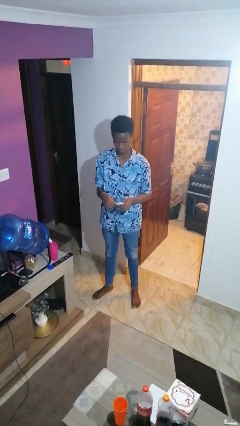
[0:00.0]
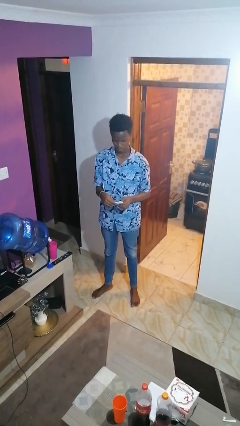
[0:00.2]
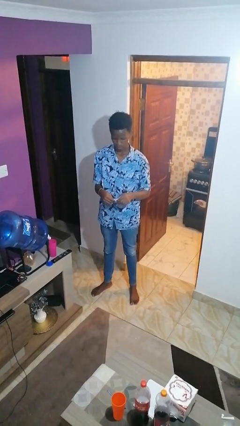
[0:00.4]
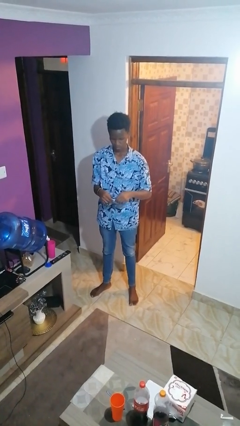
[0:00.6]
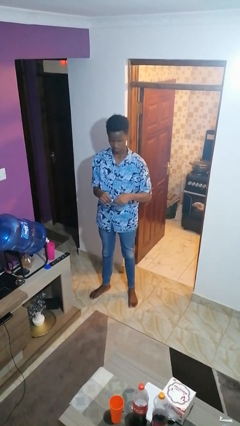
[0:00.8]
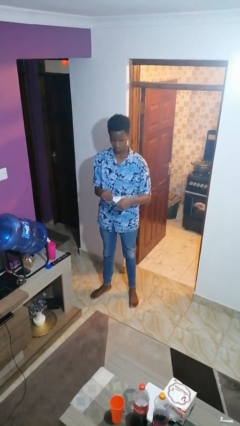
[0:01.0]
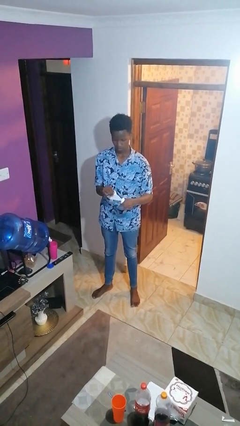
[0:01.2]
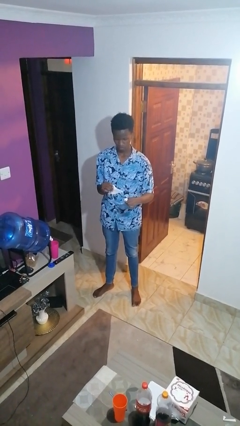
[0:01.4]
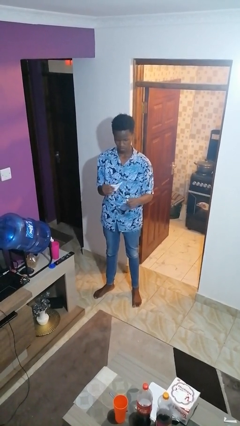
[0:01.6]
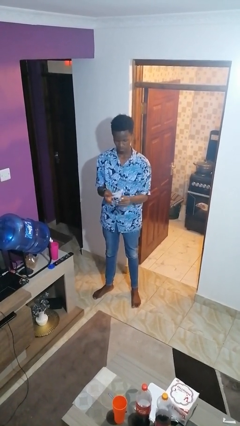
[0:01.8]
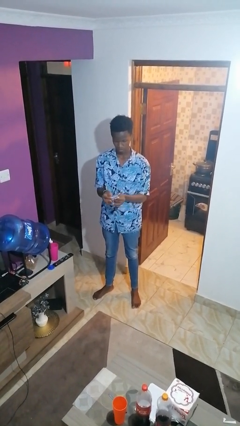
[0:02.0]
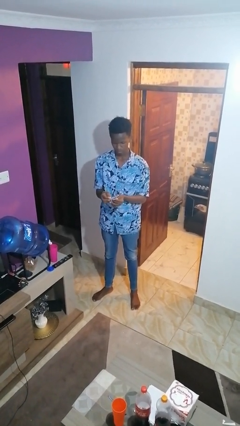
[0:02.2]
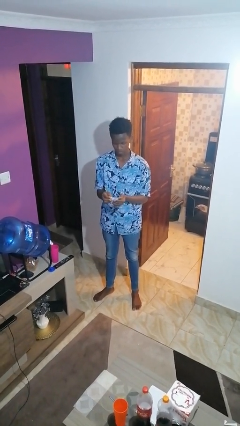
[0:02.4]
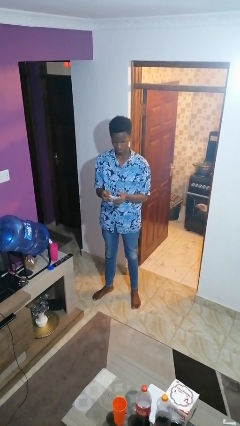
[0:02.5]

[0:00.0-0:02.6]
person tears paper

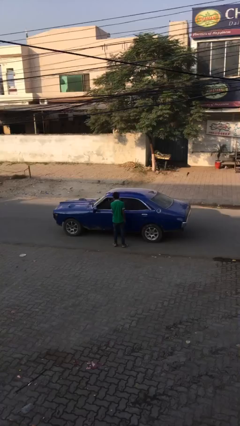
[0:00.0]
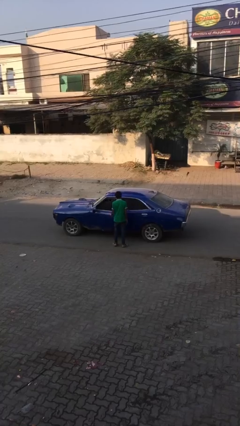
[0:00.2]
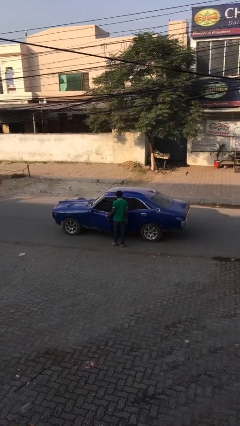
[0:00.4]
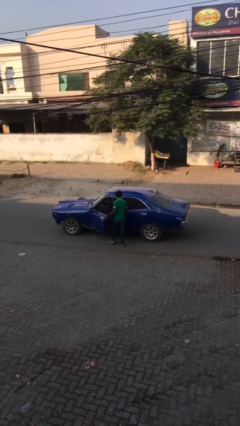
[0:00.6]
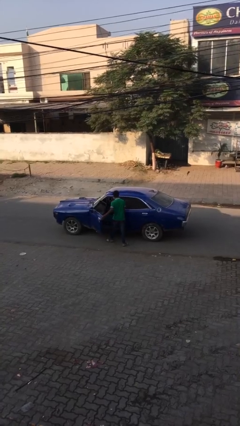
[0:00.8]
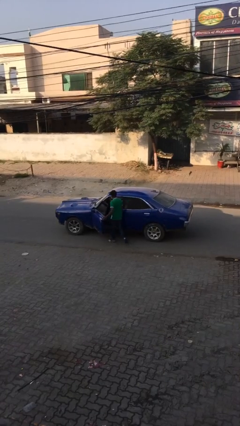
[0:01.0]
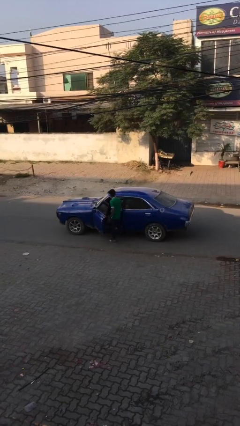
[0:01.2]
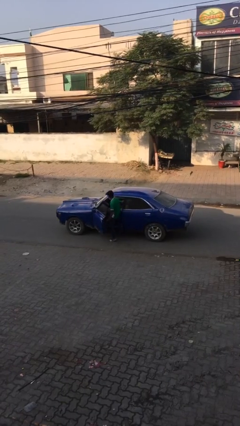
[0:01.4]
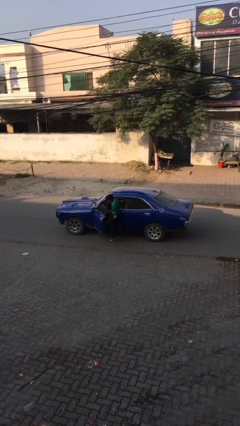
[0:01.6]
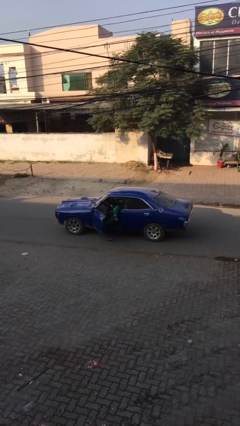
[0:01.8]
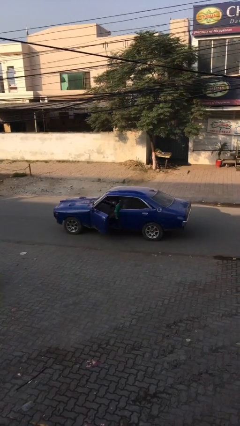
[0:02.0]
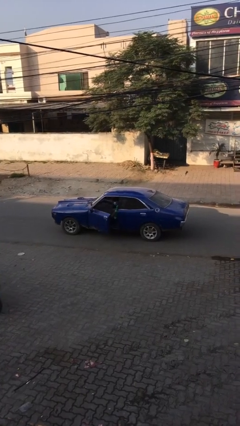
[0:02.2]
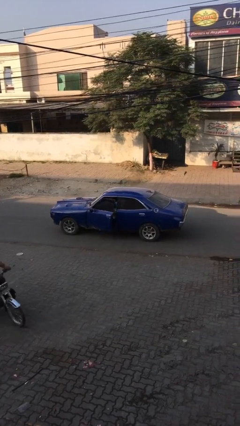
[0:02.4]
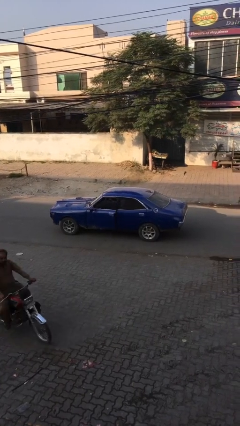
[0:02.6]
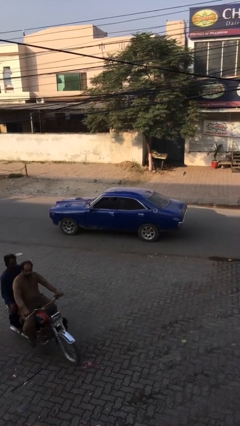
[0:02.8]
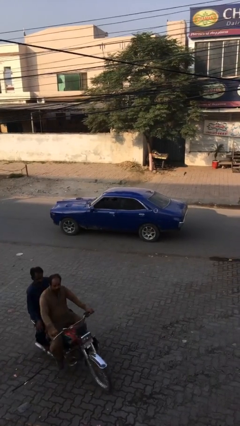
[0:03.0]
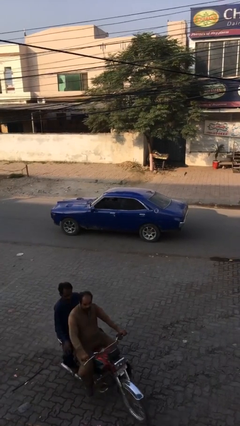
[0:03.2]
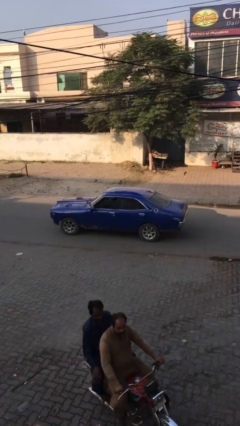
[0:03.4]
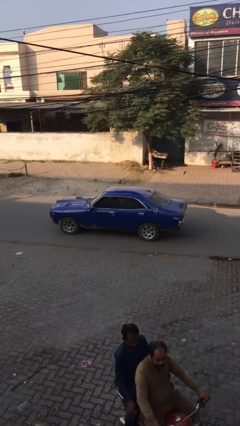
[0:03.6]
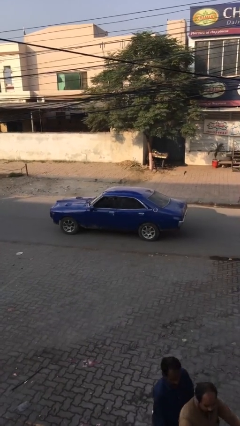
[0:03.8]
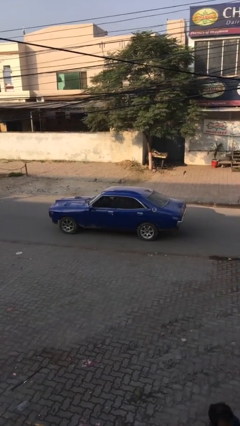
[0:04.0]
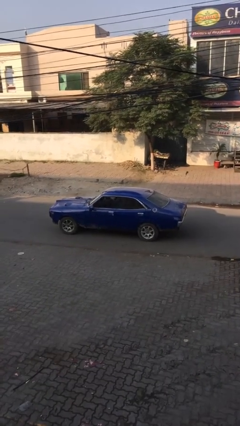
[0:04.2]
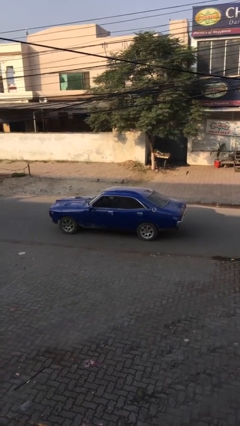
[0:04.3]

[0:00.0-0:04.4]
car picks up person

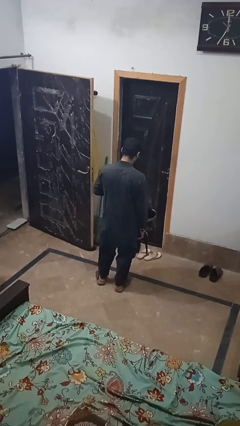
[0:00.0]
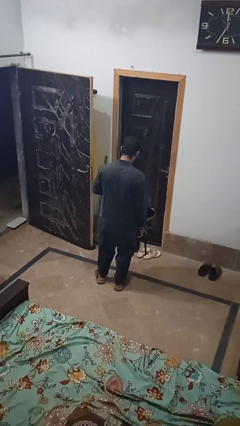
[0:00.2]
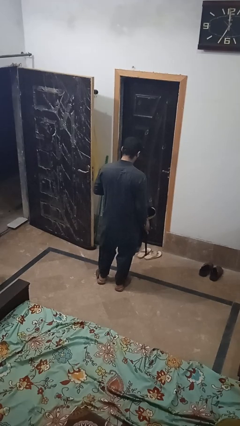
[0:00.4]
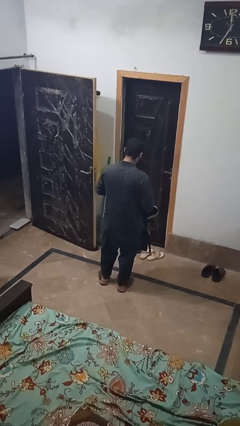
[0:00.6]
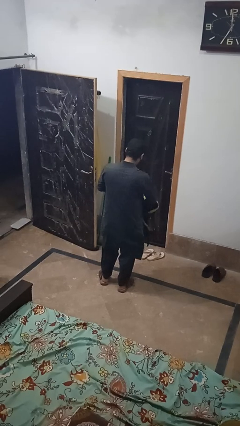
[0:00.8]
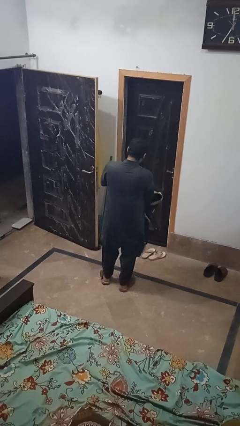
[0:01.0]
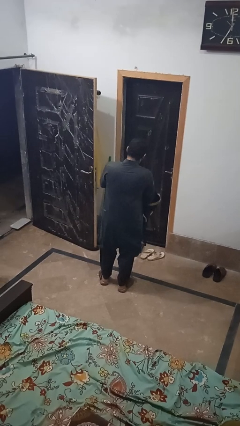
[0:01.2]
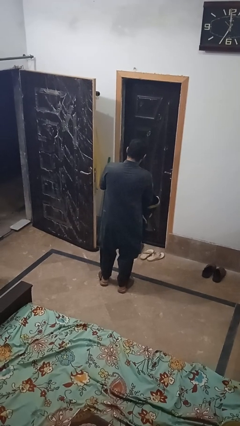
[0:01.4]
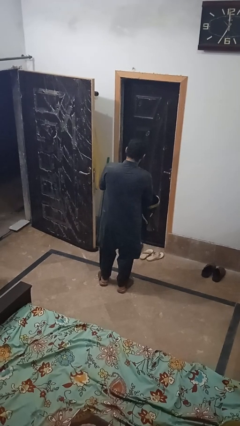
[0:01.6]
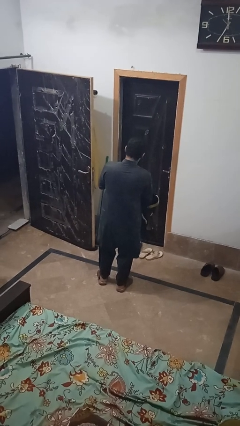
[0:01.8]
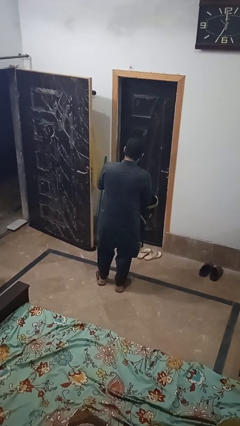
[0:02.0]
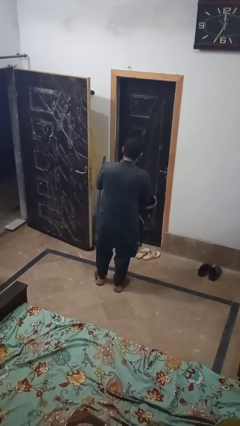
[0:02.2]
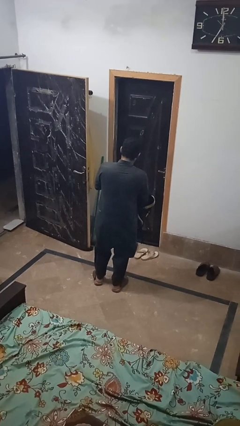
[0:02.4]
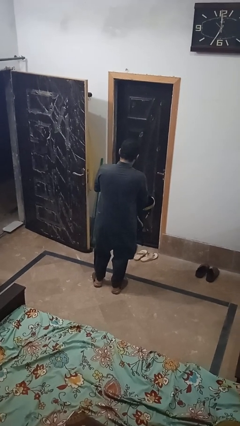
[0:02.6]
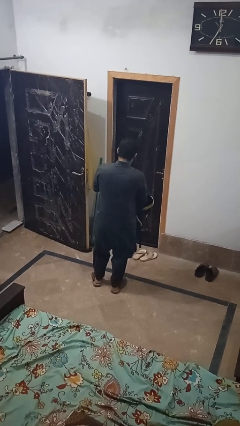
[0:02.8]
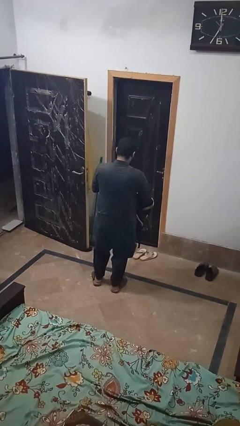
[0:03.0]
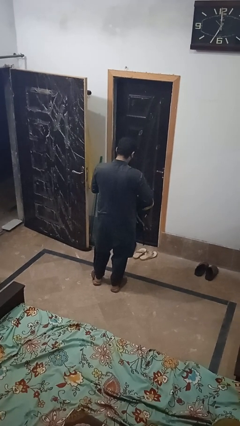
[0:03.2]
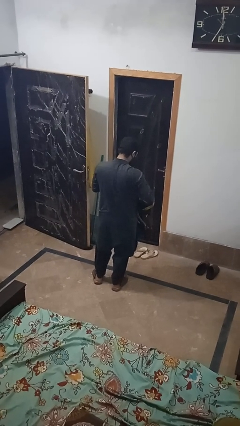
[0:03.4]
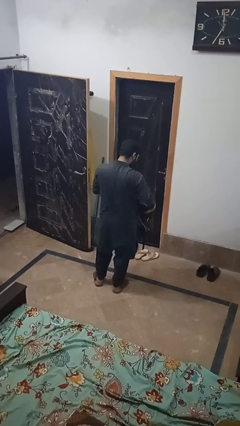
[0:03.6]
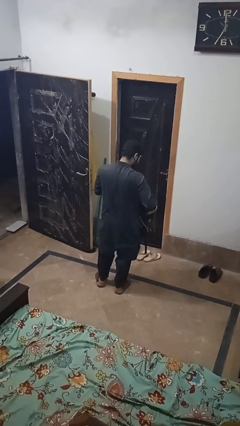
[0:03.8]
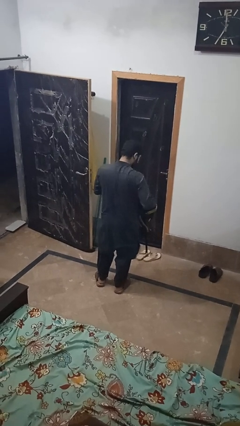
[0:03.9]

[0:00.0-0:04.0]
person searches in bag

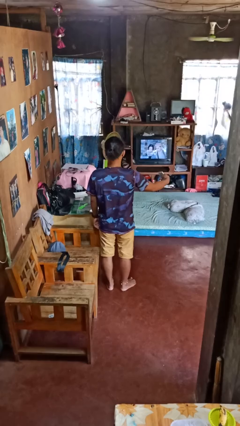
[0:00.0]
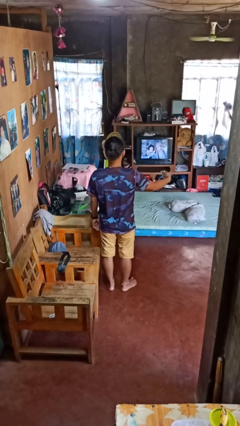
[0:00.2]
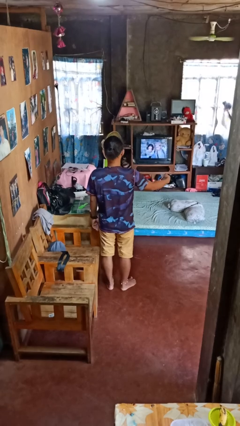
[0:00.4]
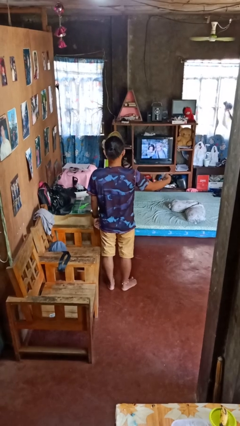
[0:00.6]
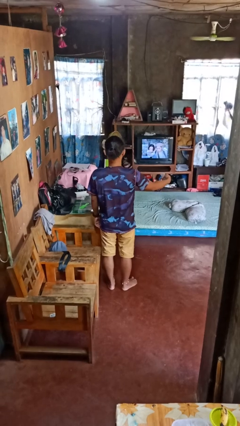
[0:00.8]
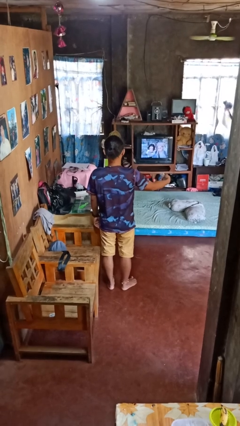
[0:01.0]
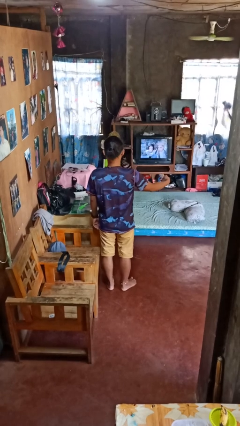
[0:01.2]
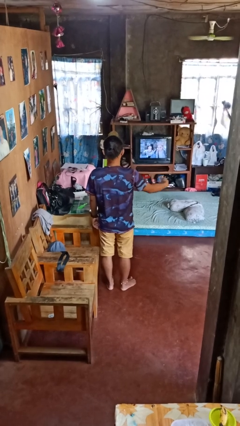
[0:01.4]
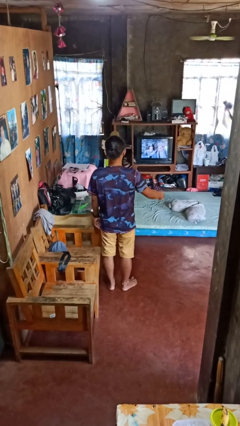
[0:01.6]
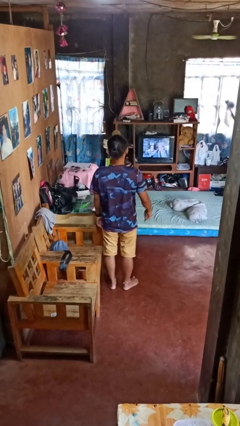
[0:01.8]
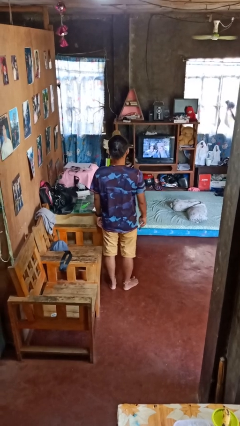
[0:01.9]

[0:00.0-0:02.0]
person uses television remote

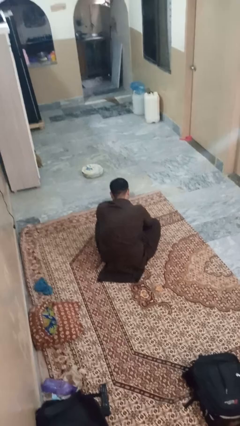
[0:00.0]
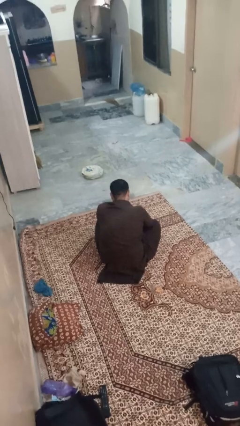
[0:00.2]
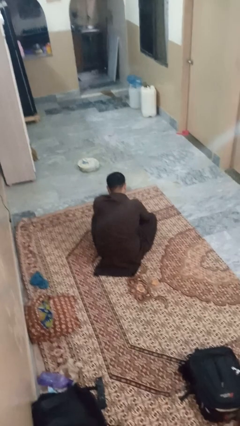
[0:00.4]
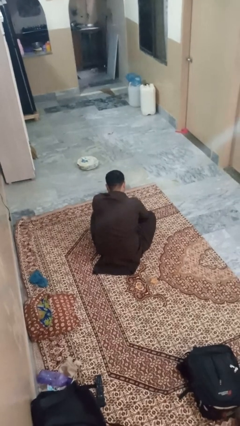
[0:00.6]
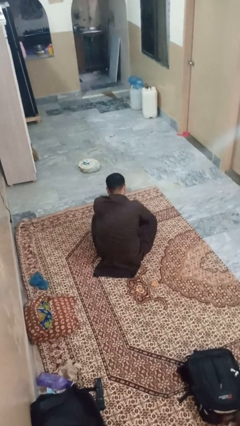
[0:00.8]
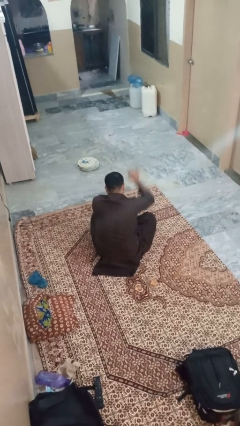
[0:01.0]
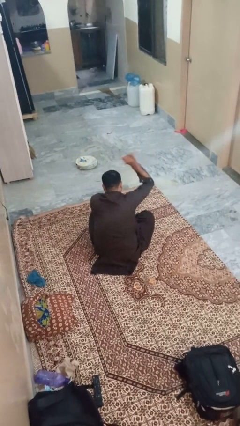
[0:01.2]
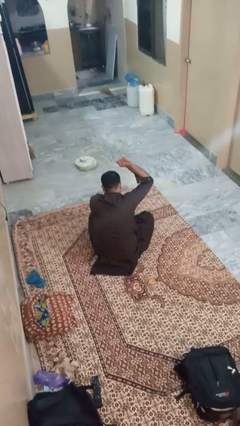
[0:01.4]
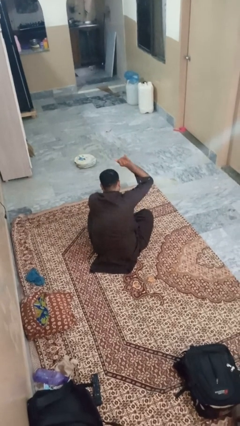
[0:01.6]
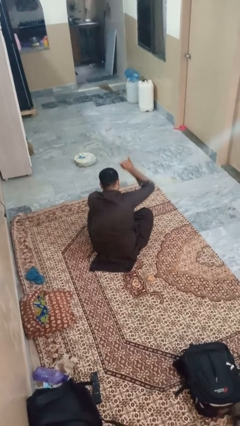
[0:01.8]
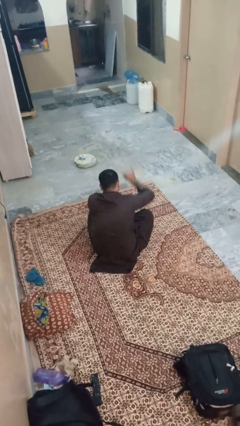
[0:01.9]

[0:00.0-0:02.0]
person gestures hang loose

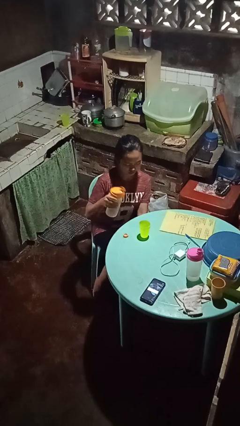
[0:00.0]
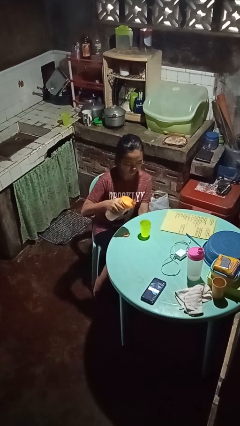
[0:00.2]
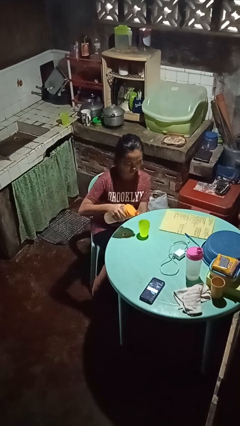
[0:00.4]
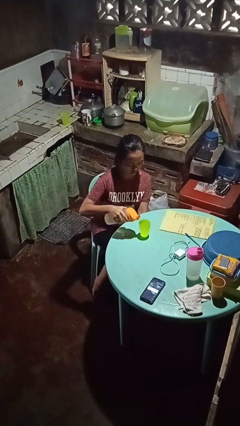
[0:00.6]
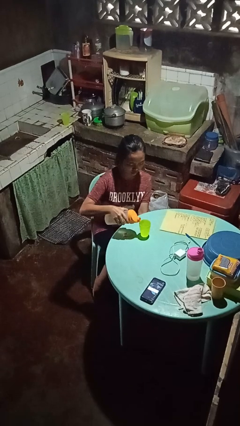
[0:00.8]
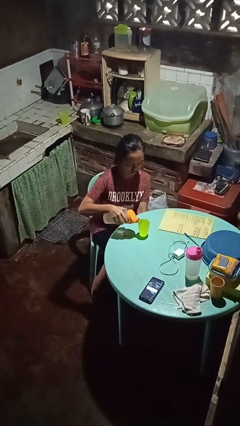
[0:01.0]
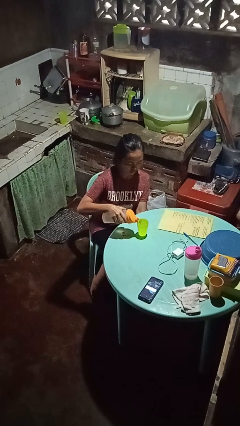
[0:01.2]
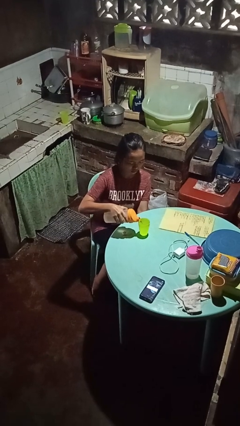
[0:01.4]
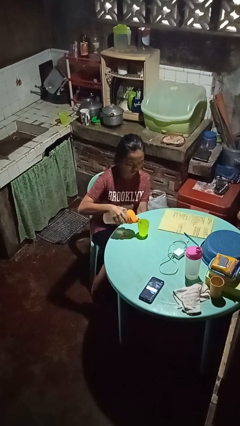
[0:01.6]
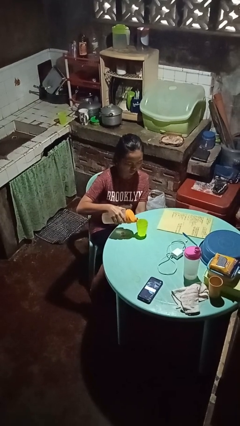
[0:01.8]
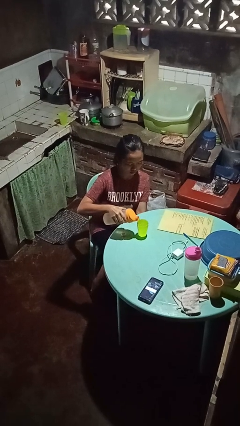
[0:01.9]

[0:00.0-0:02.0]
person pours liquid into cup
